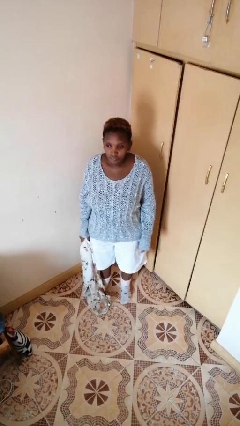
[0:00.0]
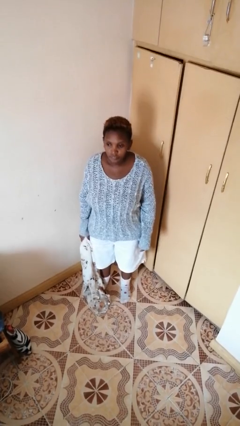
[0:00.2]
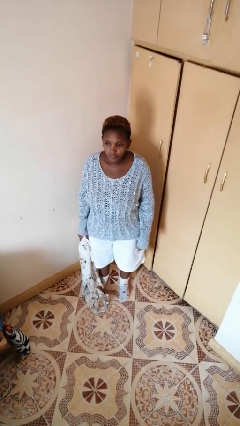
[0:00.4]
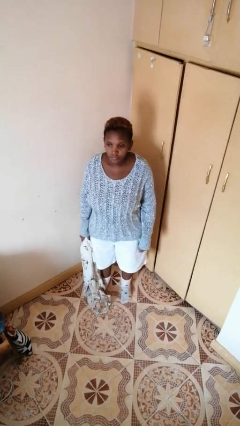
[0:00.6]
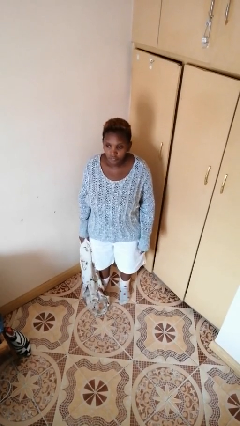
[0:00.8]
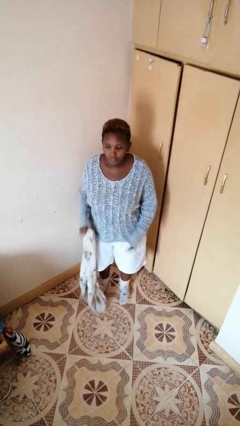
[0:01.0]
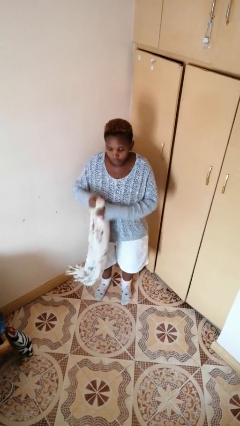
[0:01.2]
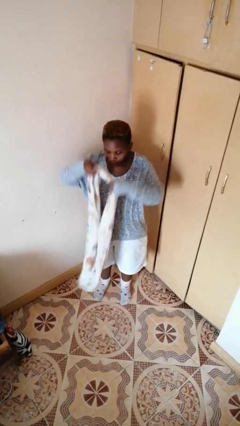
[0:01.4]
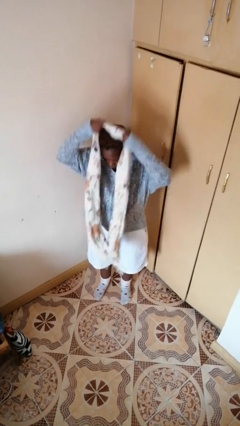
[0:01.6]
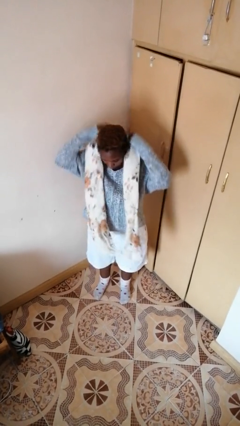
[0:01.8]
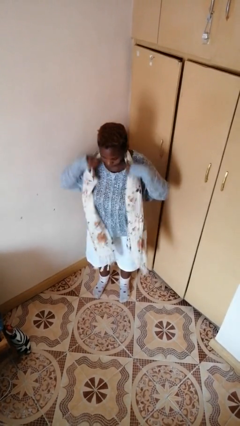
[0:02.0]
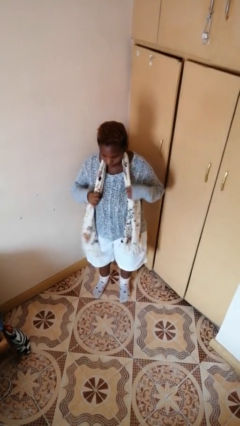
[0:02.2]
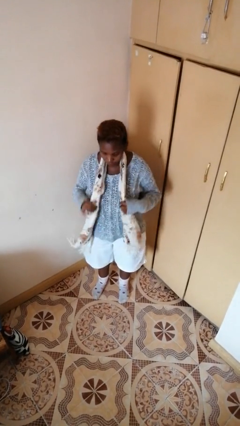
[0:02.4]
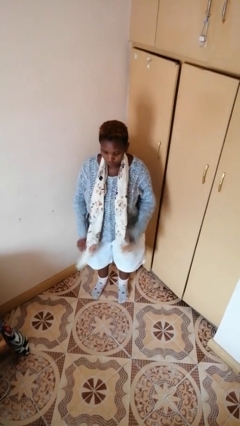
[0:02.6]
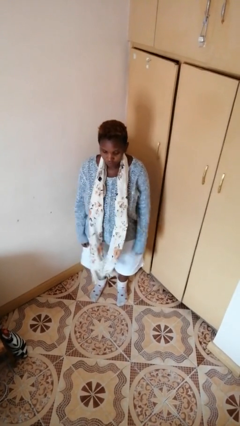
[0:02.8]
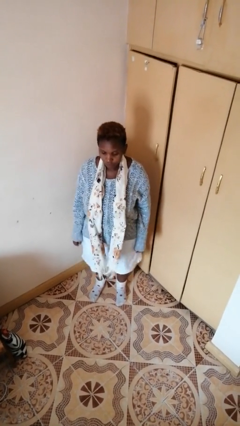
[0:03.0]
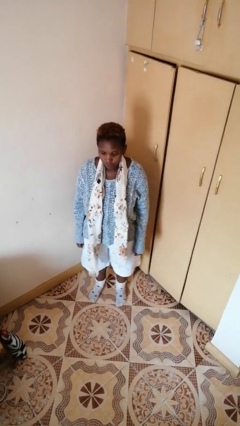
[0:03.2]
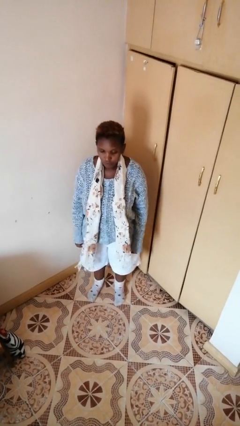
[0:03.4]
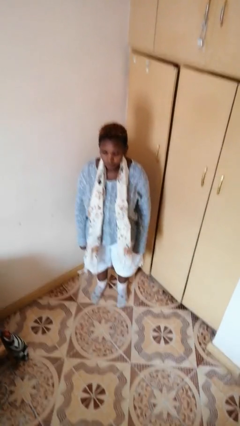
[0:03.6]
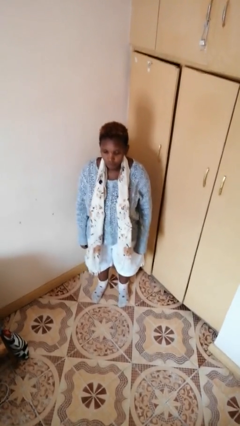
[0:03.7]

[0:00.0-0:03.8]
person puts on scarf

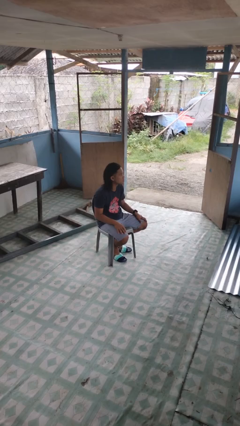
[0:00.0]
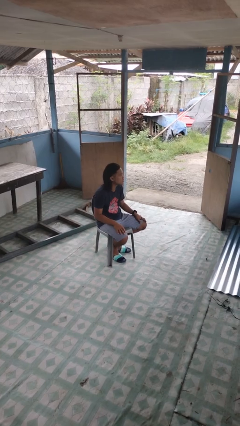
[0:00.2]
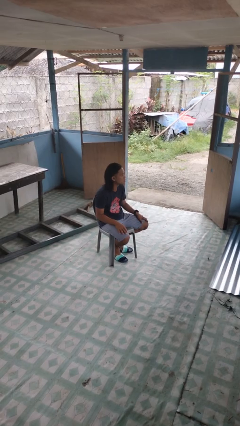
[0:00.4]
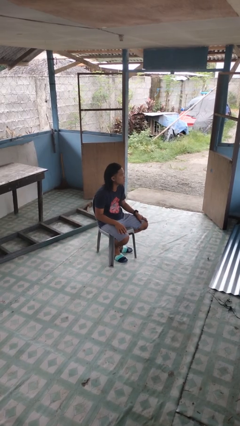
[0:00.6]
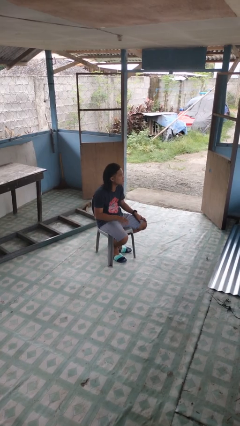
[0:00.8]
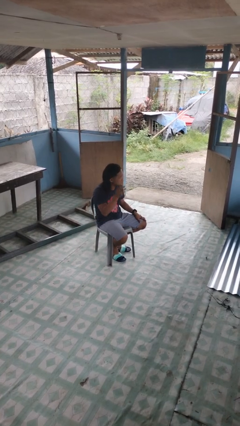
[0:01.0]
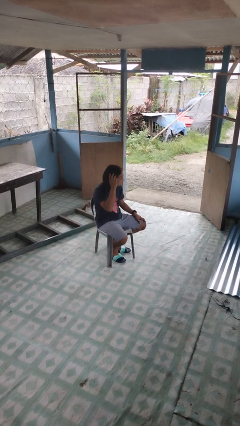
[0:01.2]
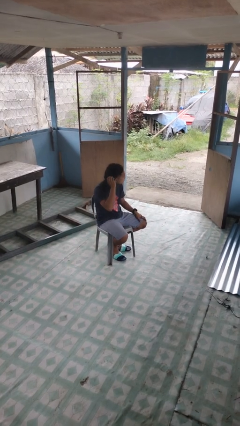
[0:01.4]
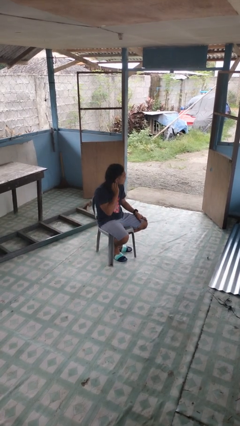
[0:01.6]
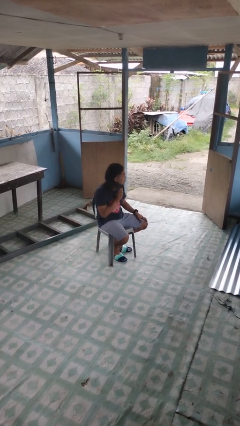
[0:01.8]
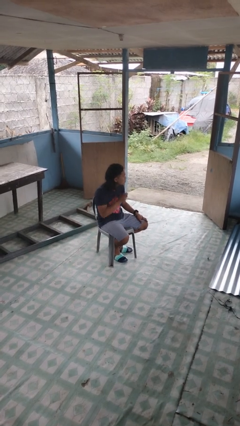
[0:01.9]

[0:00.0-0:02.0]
person strokes hair

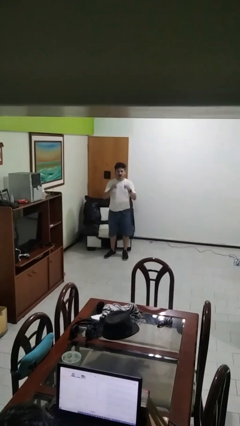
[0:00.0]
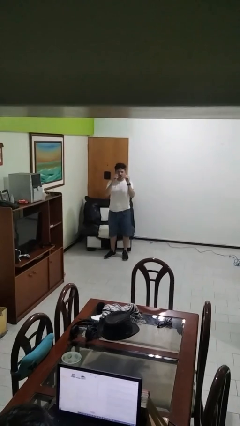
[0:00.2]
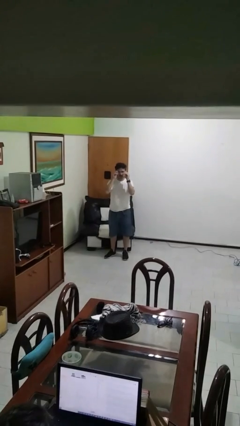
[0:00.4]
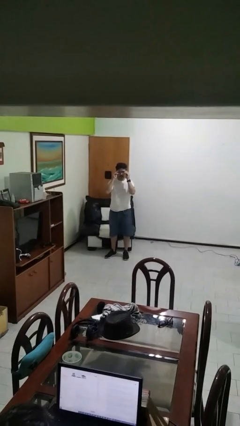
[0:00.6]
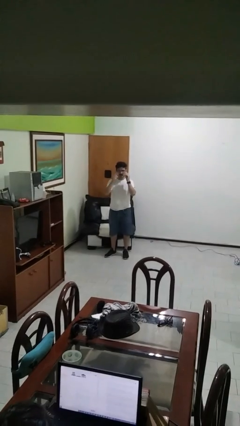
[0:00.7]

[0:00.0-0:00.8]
person puts on glasses

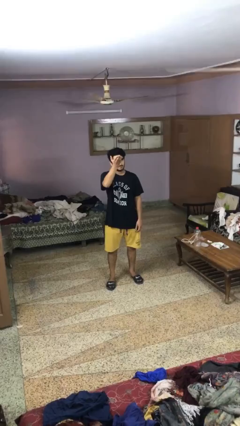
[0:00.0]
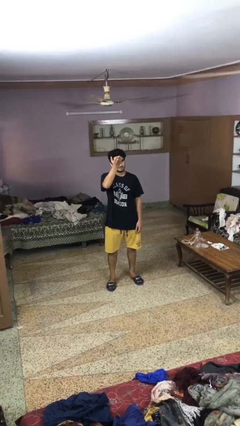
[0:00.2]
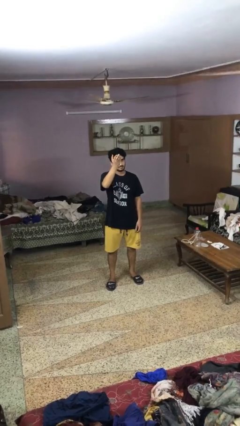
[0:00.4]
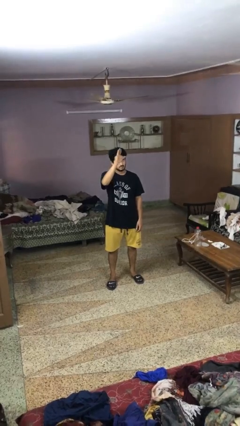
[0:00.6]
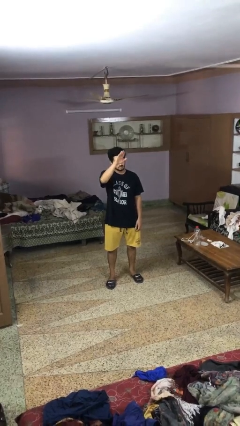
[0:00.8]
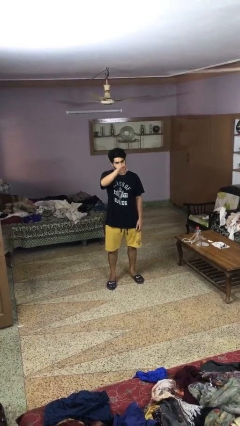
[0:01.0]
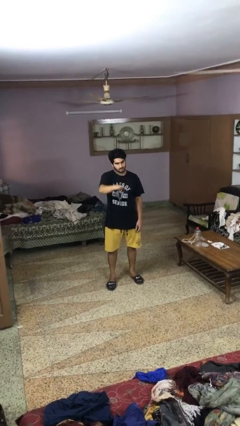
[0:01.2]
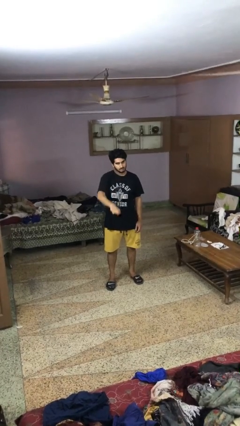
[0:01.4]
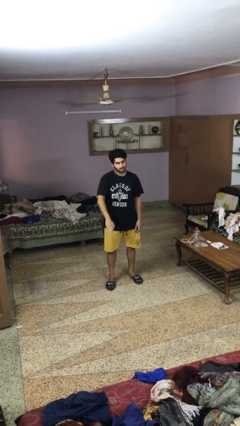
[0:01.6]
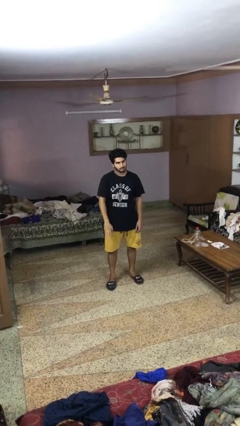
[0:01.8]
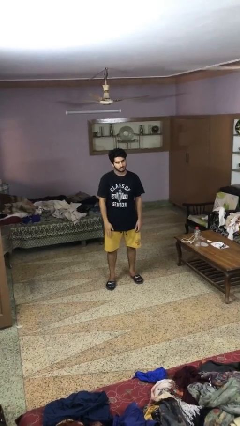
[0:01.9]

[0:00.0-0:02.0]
person gestures swipe down

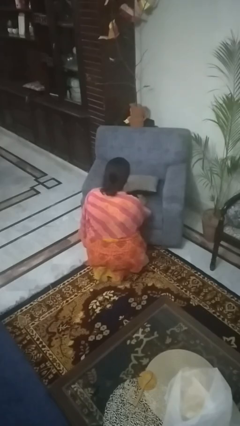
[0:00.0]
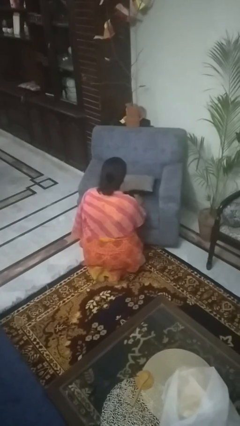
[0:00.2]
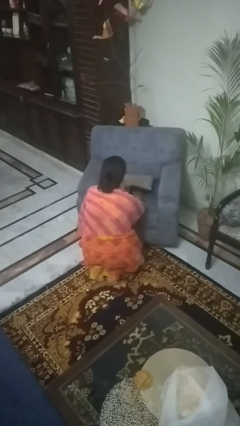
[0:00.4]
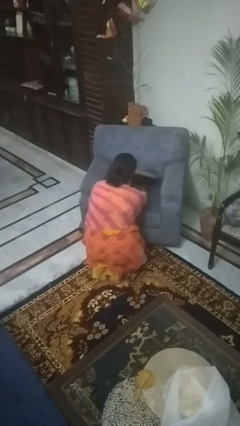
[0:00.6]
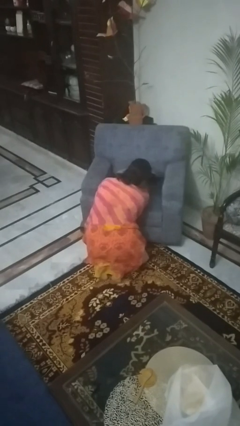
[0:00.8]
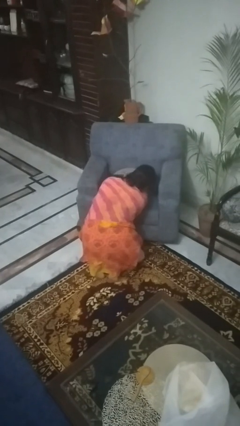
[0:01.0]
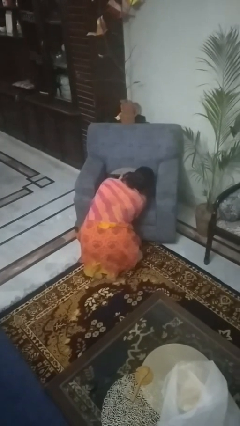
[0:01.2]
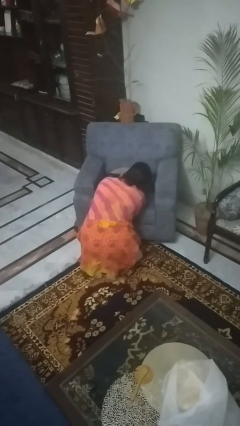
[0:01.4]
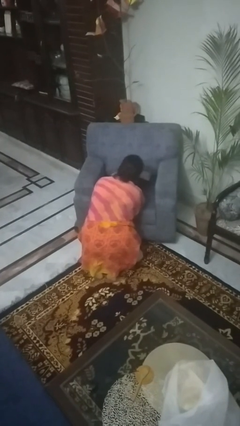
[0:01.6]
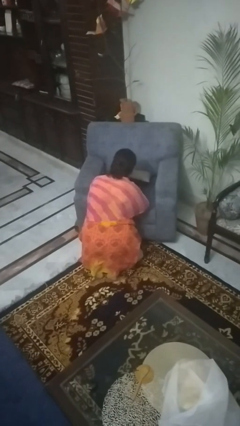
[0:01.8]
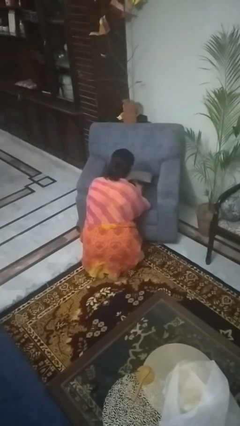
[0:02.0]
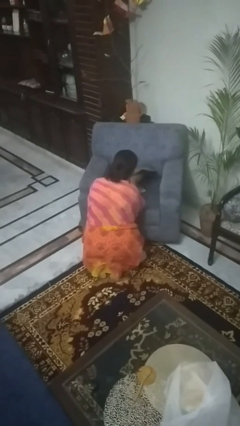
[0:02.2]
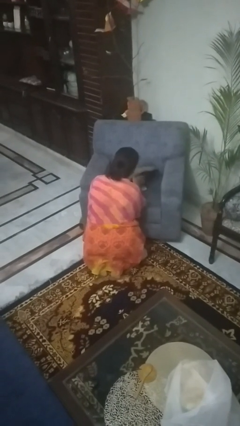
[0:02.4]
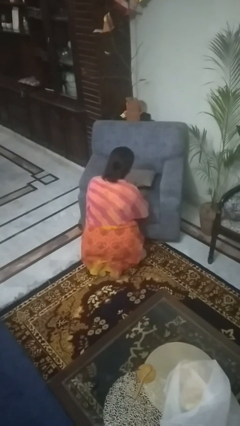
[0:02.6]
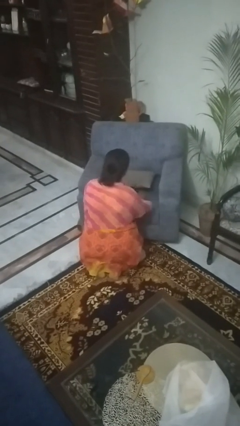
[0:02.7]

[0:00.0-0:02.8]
person searches in couch

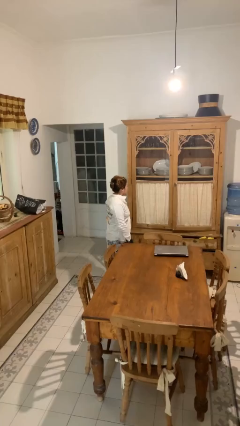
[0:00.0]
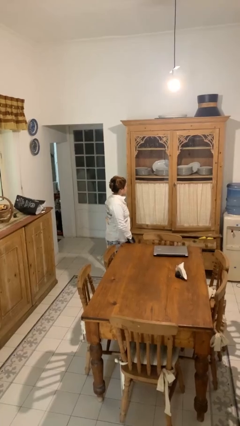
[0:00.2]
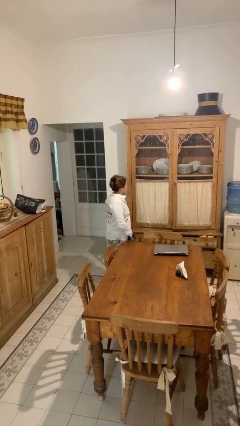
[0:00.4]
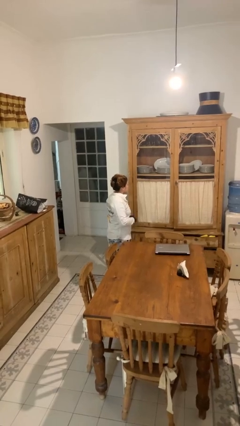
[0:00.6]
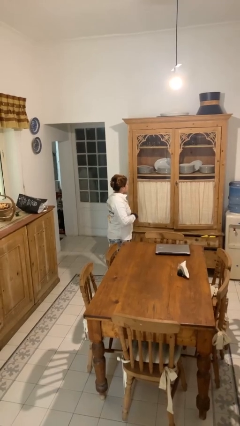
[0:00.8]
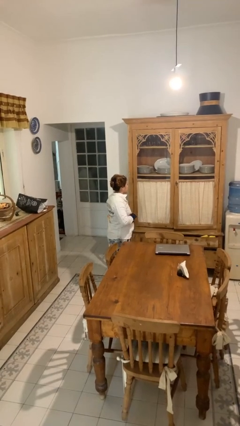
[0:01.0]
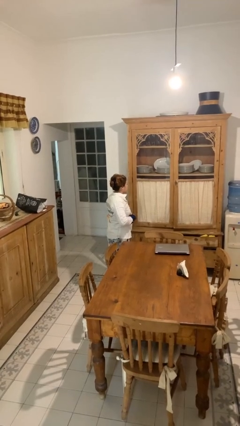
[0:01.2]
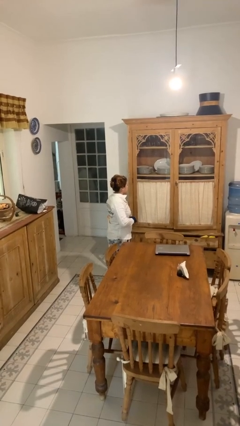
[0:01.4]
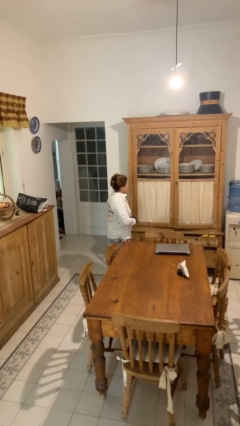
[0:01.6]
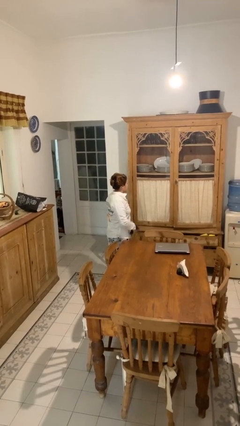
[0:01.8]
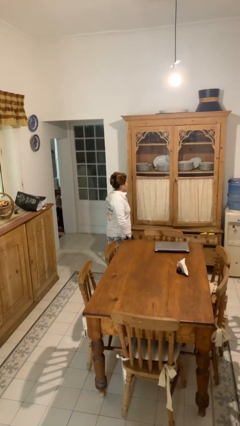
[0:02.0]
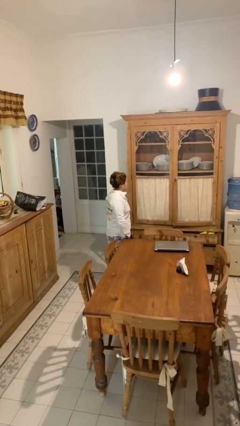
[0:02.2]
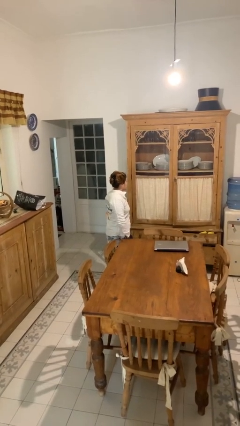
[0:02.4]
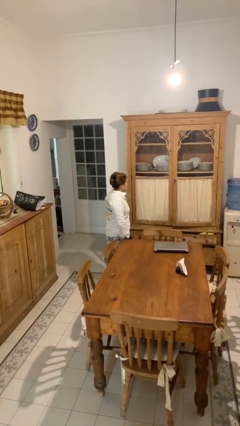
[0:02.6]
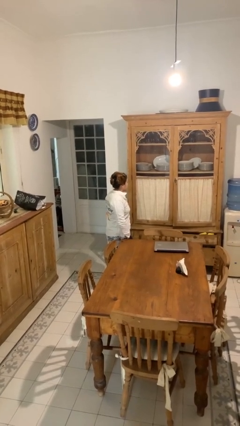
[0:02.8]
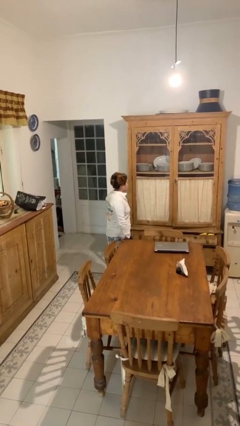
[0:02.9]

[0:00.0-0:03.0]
person buttons shirt

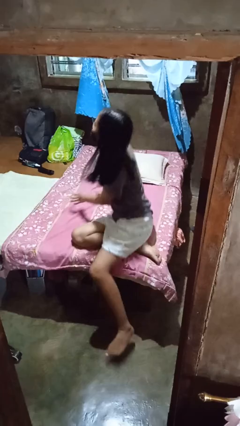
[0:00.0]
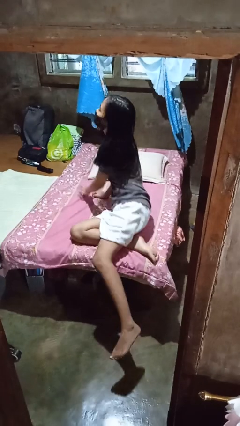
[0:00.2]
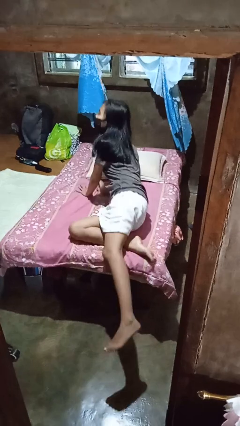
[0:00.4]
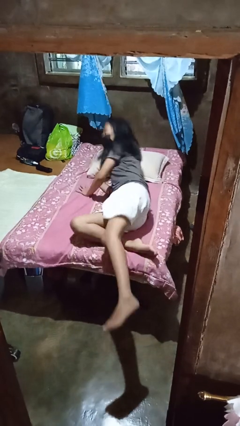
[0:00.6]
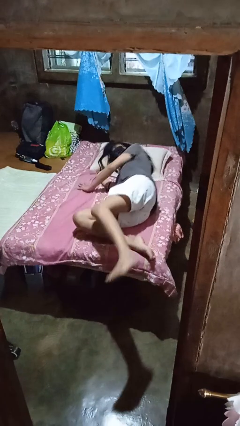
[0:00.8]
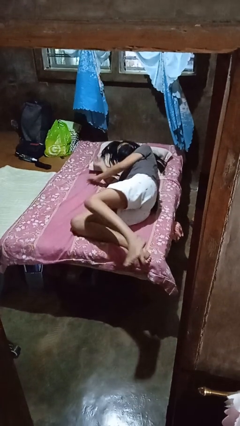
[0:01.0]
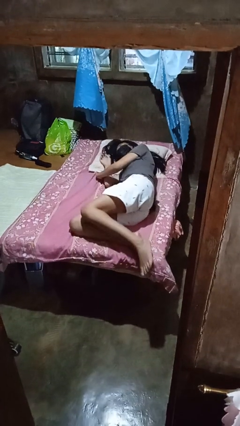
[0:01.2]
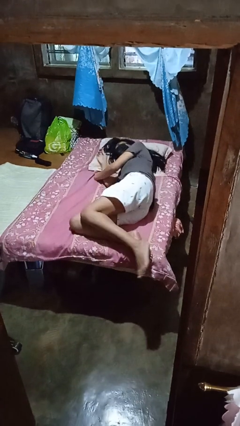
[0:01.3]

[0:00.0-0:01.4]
person lies down on bed

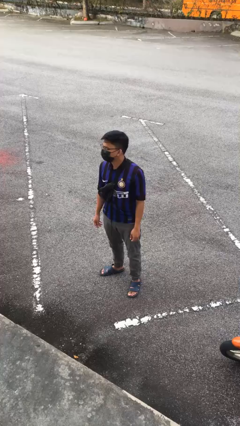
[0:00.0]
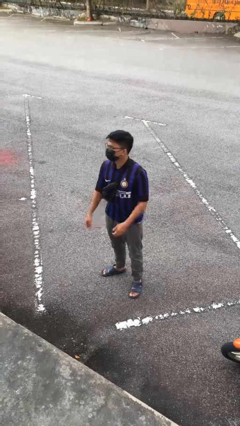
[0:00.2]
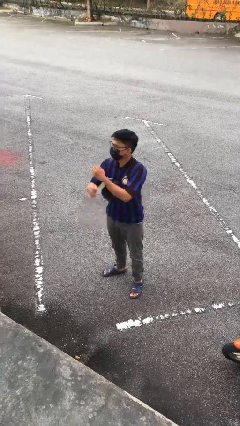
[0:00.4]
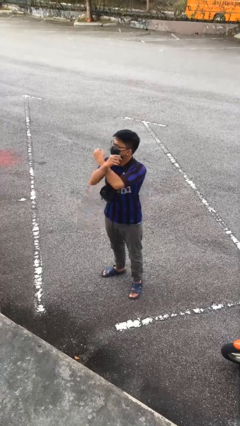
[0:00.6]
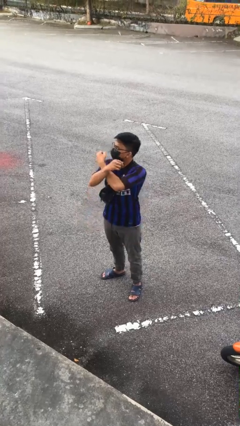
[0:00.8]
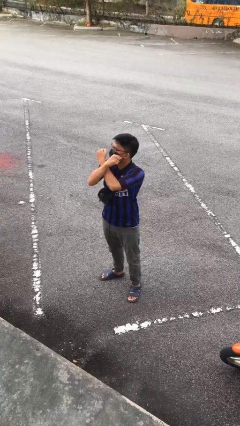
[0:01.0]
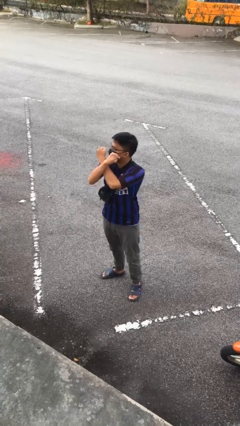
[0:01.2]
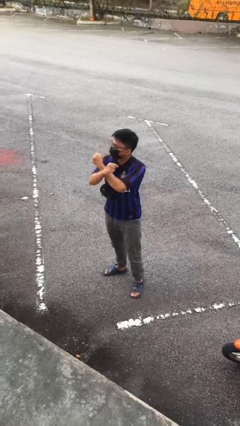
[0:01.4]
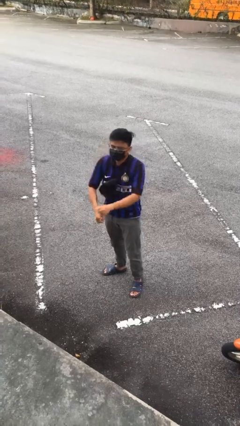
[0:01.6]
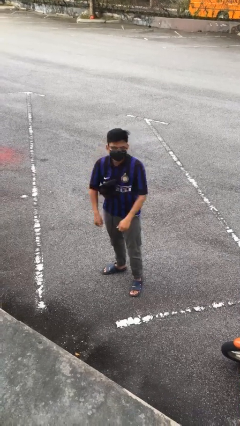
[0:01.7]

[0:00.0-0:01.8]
person gestures arms x
